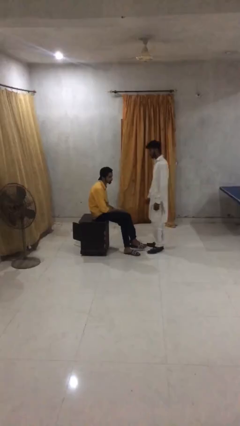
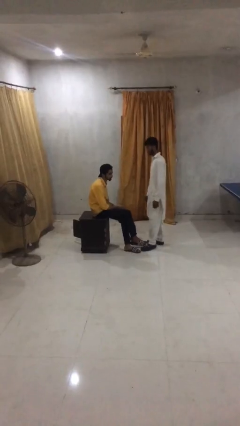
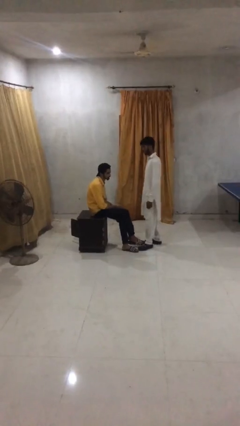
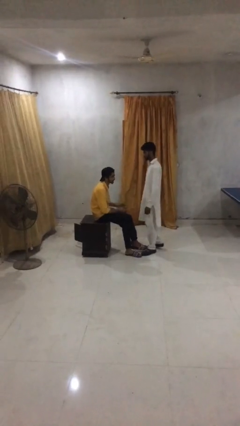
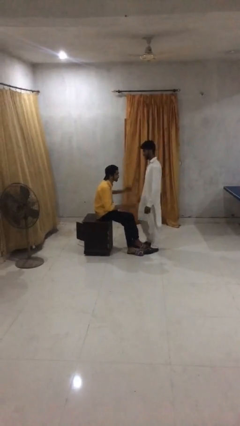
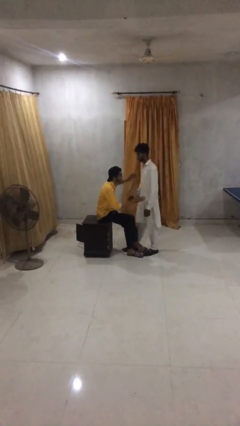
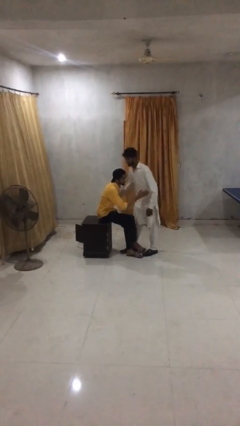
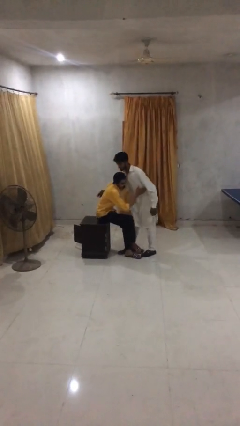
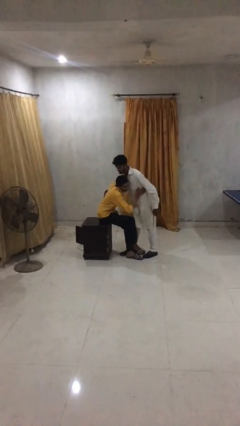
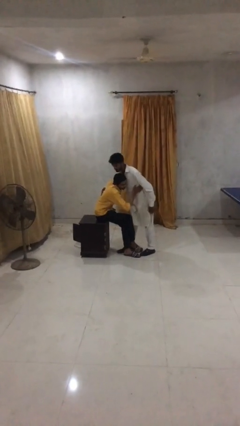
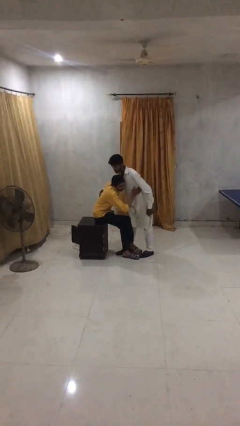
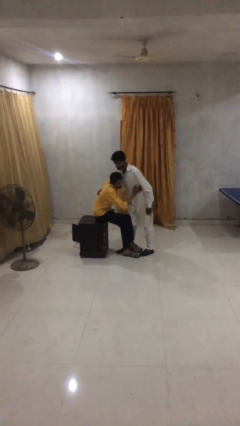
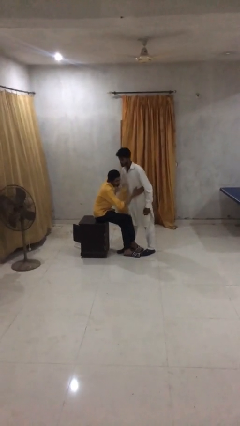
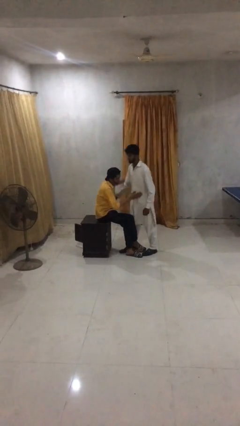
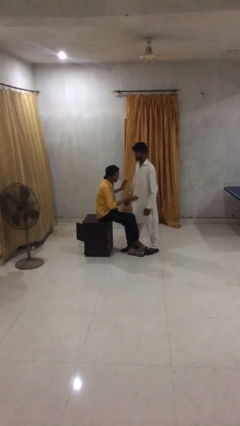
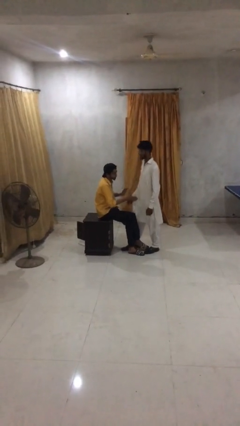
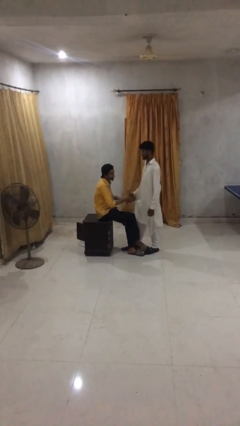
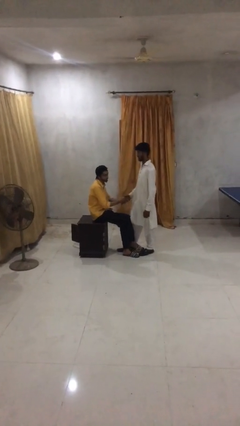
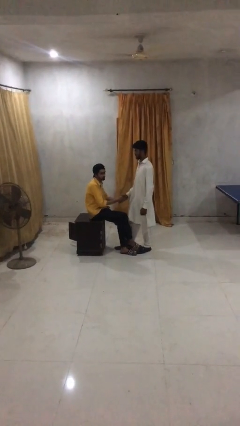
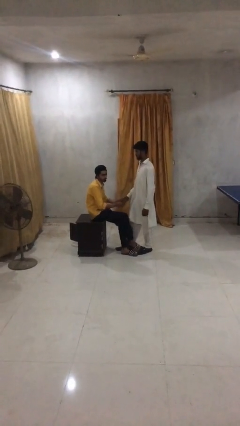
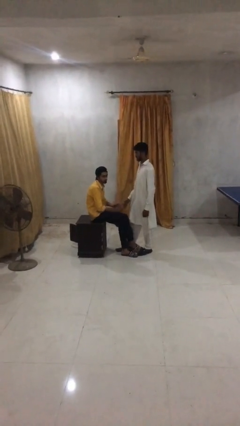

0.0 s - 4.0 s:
person embraces person

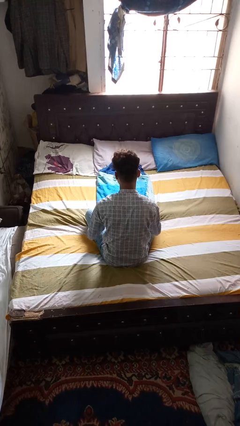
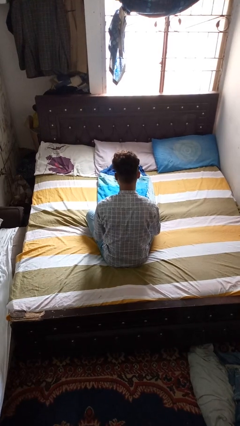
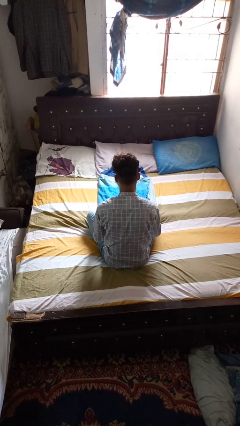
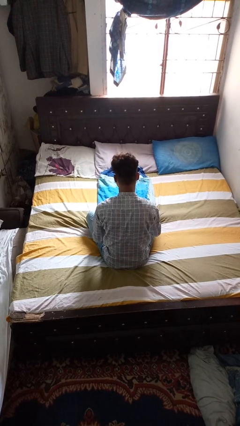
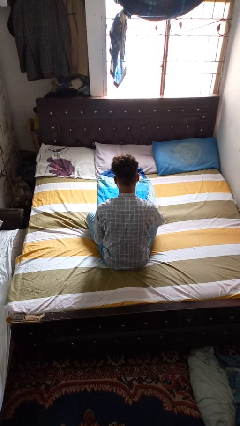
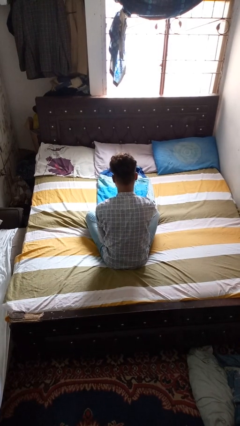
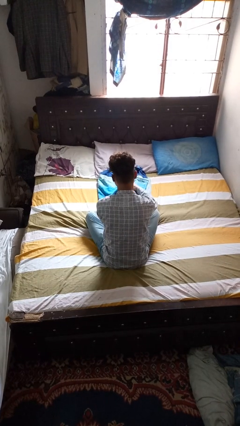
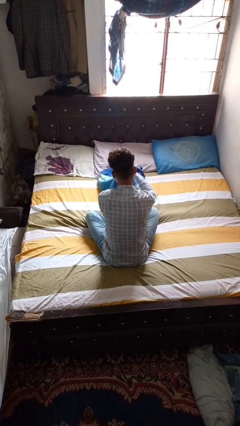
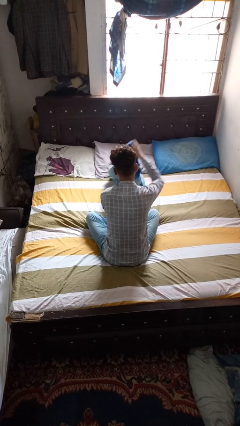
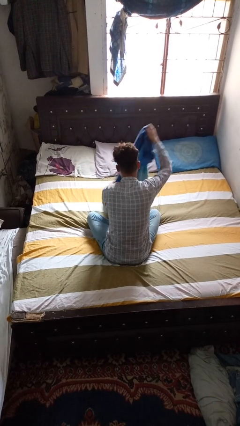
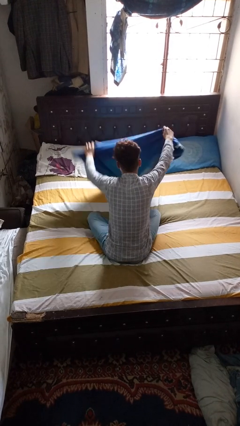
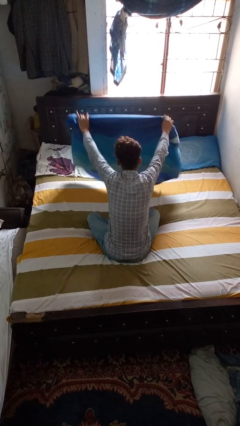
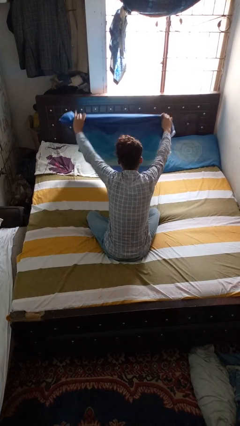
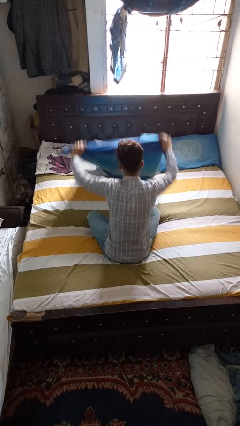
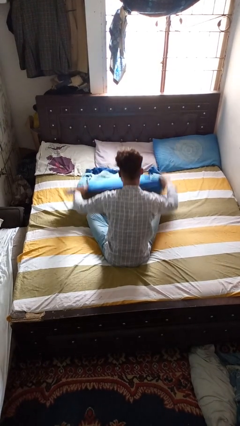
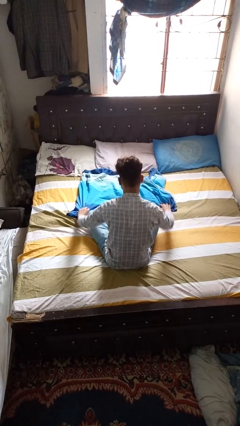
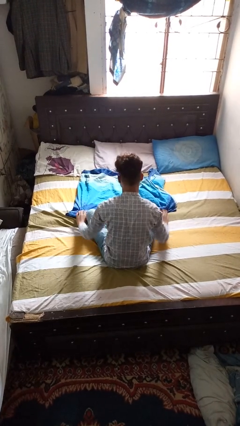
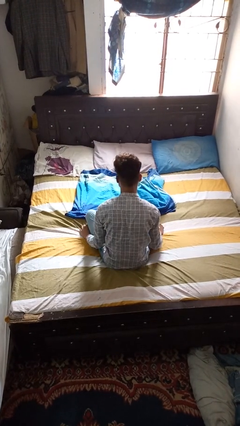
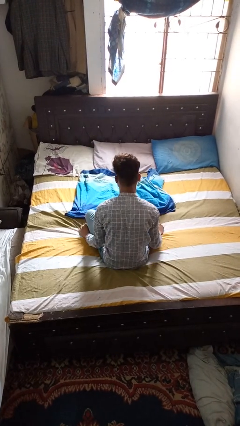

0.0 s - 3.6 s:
person unfolds blanket

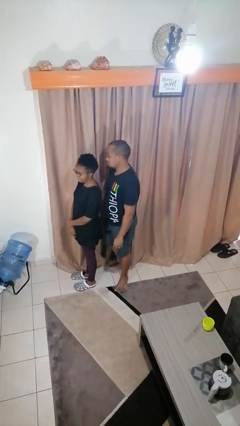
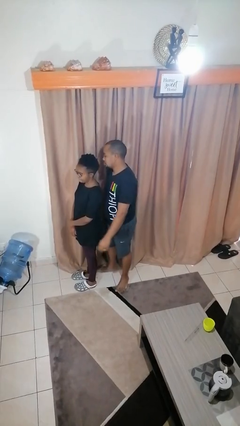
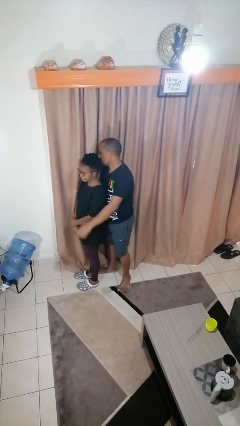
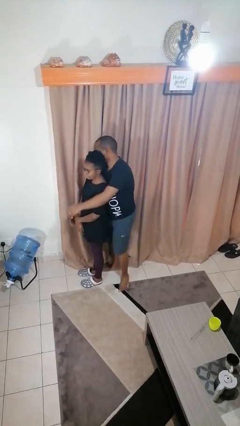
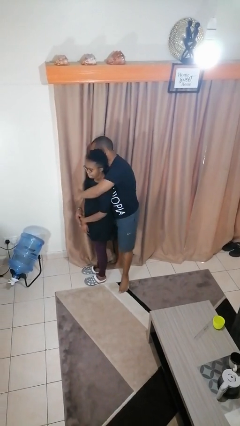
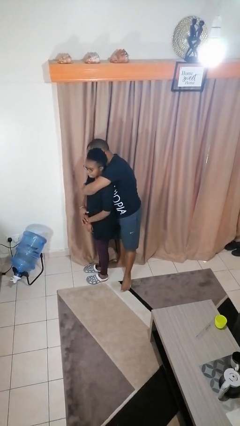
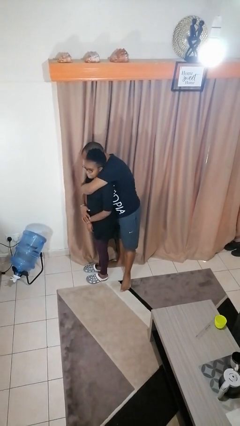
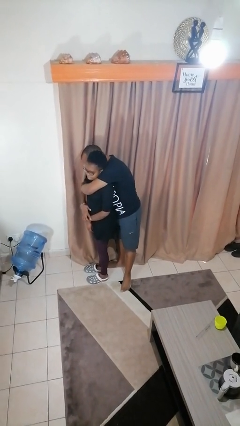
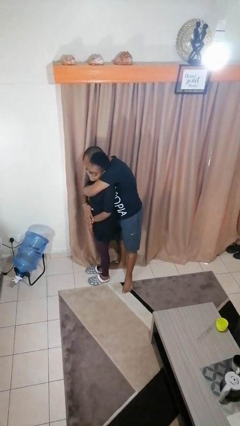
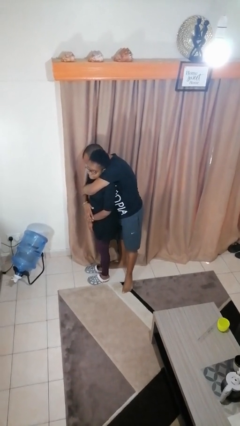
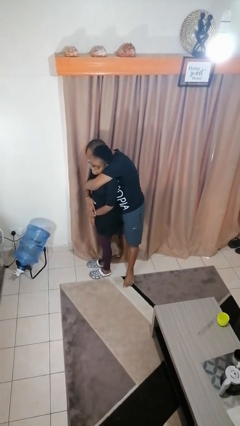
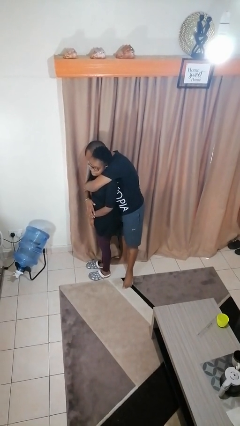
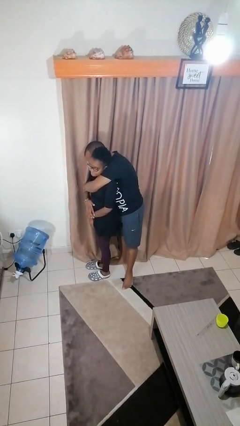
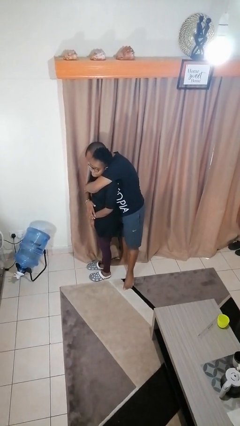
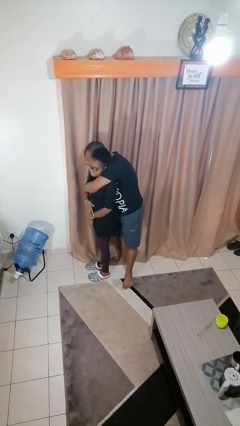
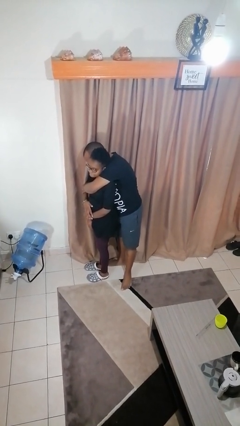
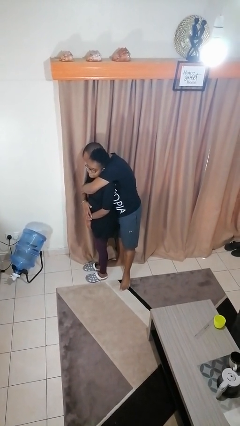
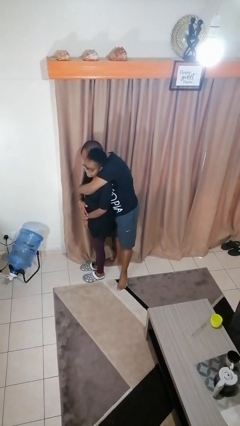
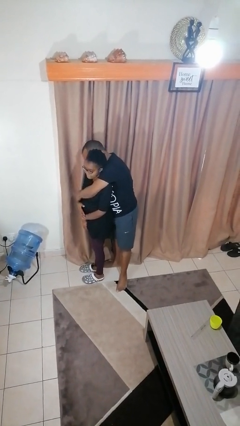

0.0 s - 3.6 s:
person hugs person from behind

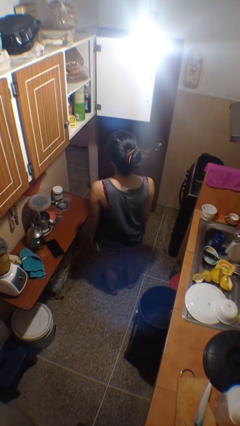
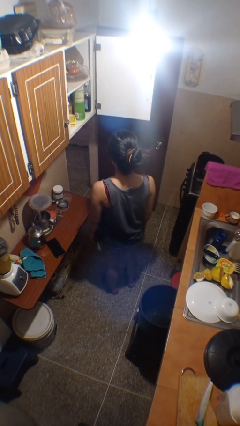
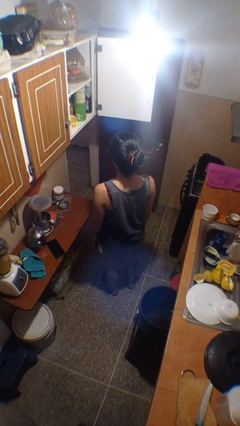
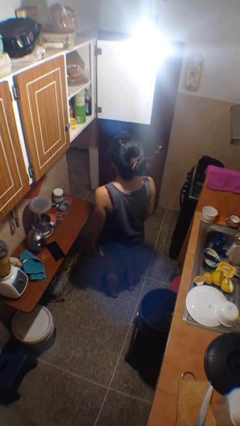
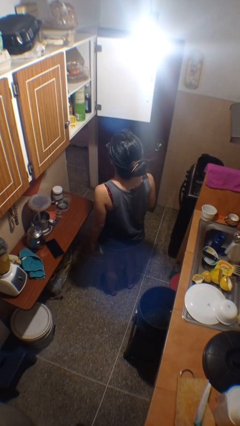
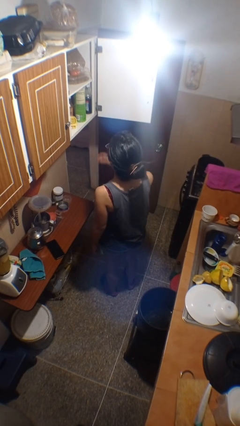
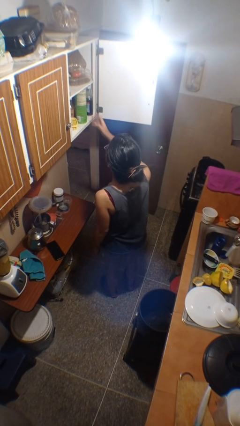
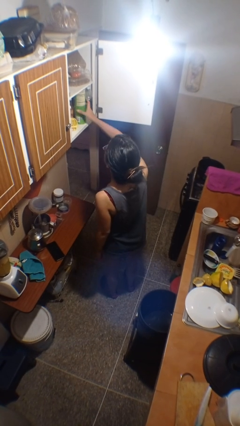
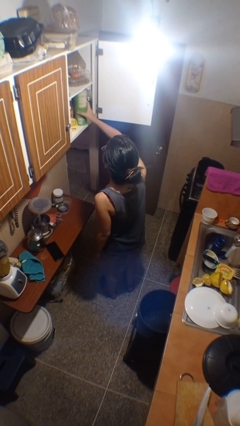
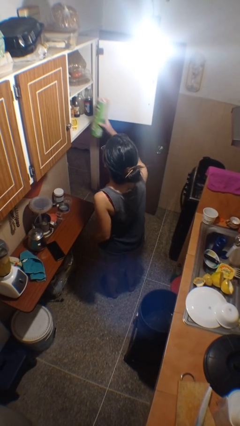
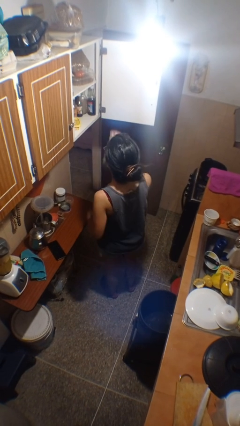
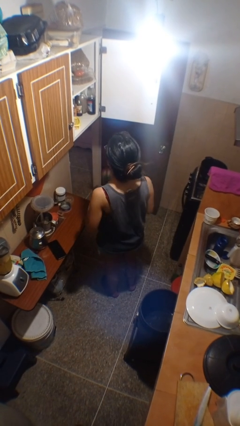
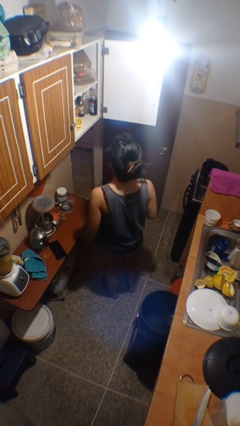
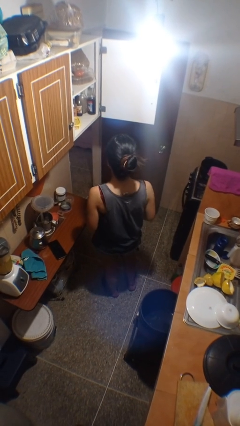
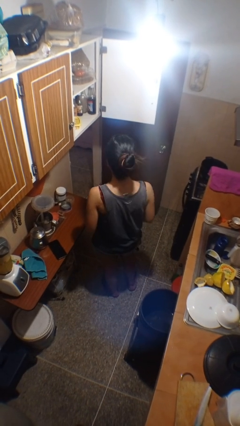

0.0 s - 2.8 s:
person takes object from cabinet

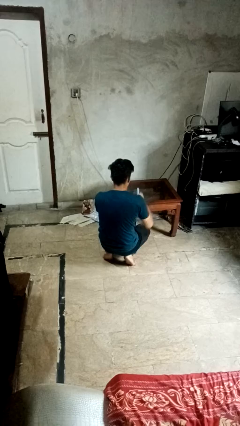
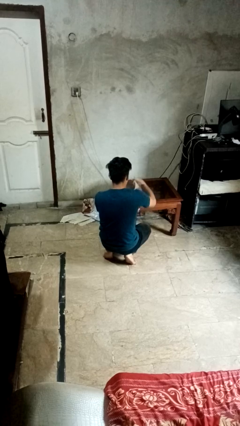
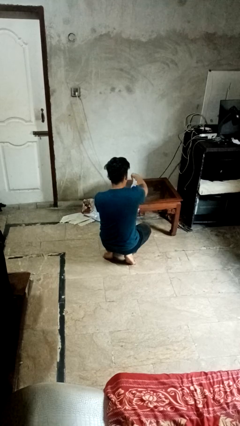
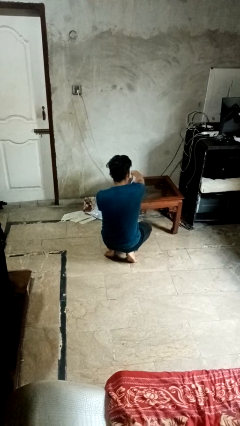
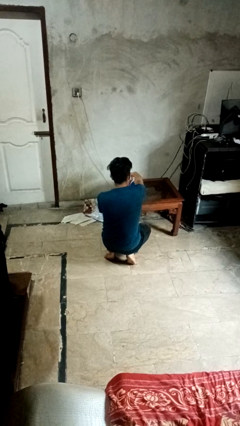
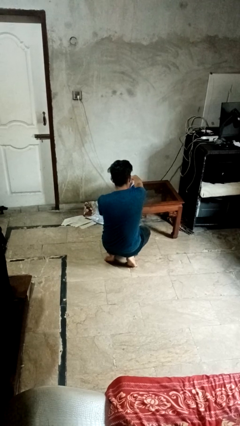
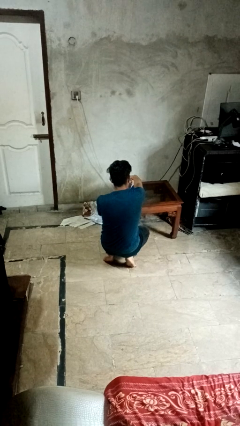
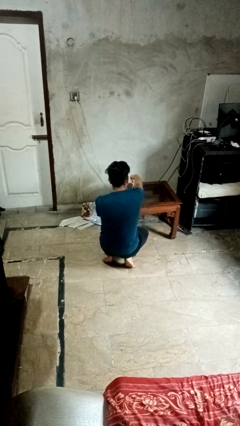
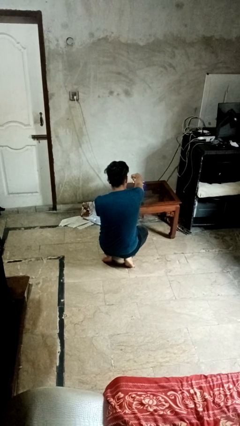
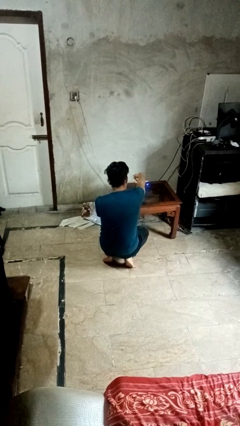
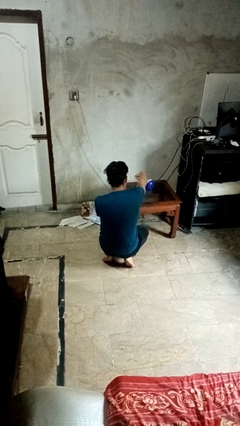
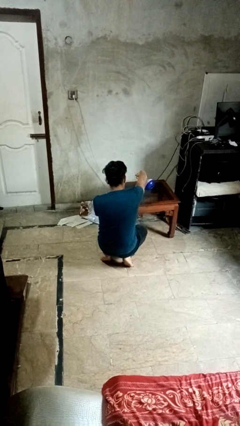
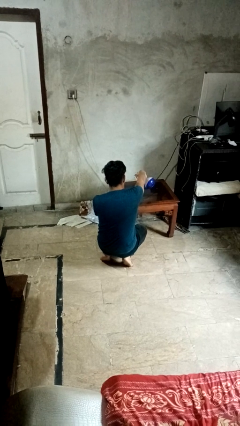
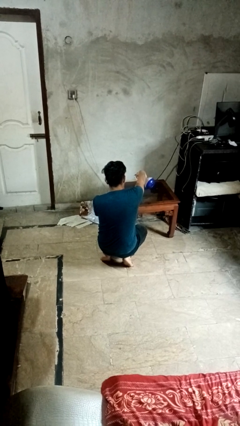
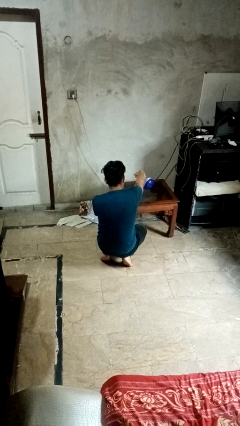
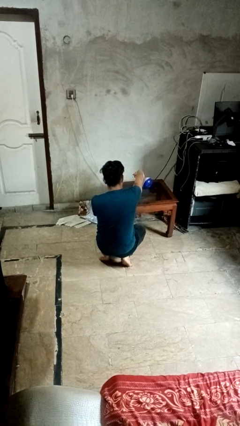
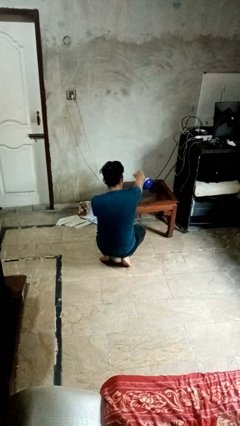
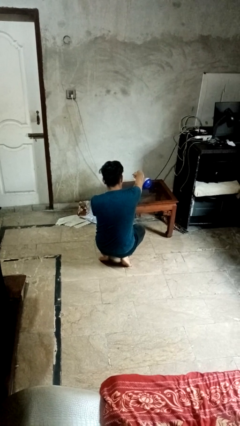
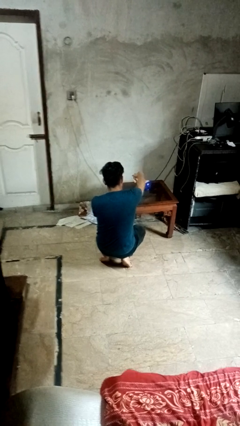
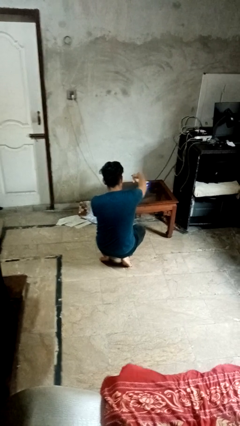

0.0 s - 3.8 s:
person sprays from bottle
